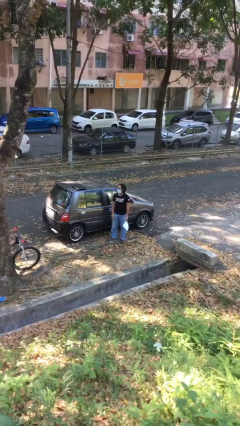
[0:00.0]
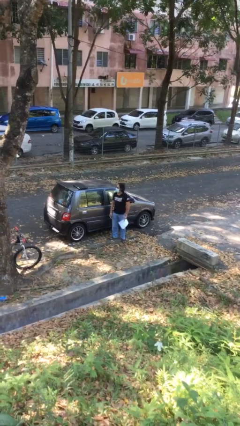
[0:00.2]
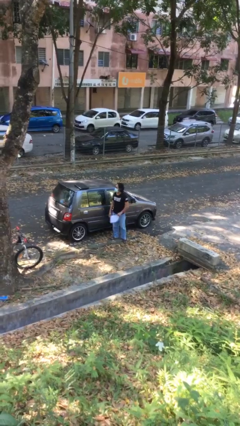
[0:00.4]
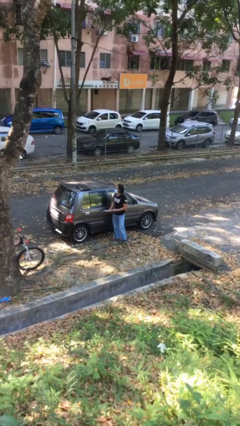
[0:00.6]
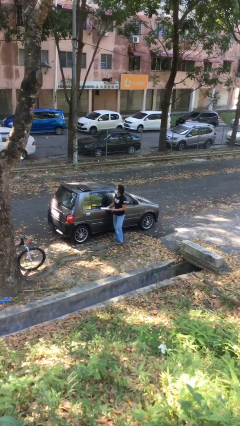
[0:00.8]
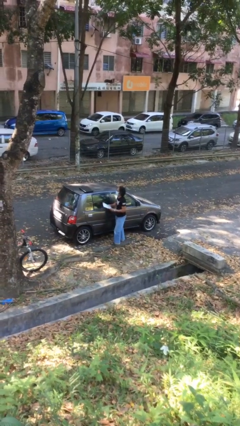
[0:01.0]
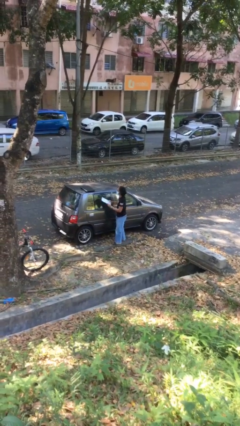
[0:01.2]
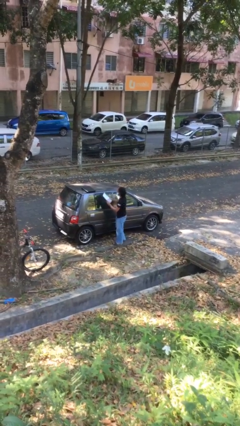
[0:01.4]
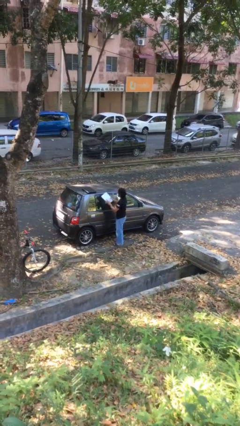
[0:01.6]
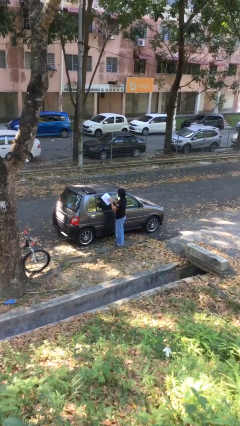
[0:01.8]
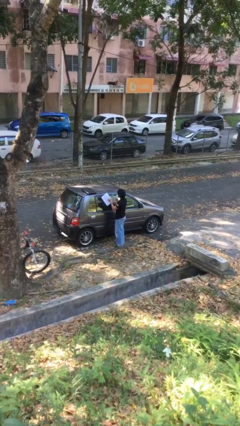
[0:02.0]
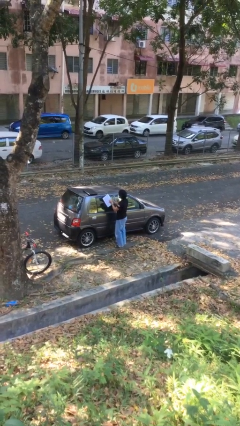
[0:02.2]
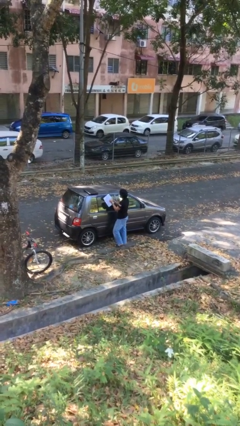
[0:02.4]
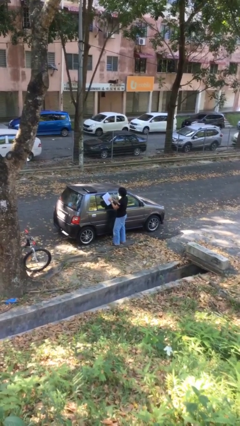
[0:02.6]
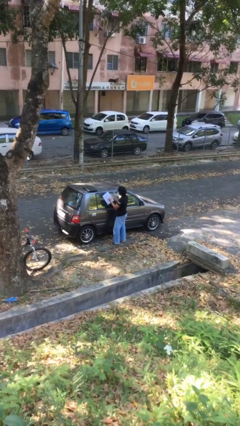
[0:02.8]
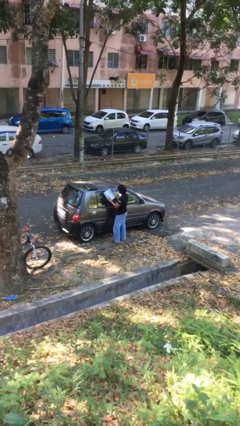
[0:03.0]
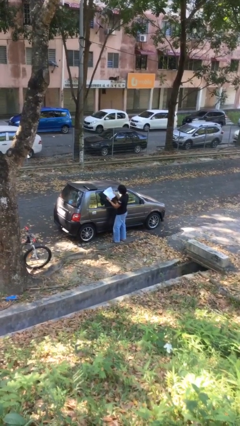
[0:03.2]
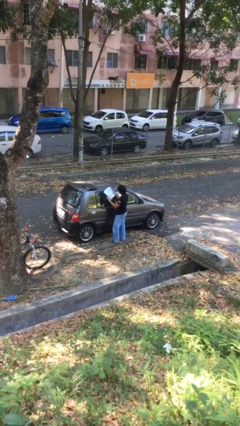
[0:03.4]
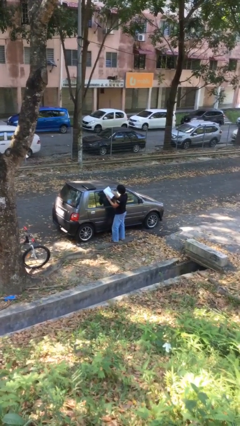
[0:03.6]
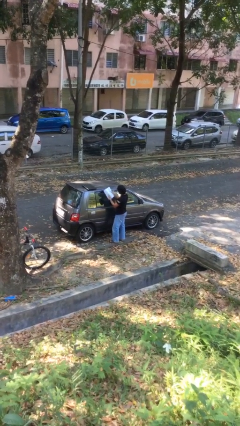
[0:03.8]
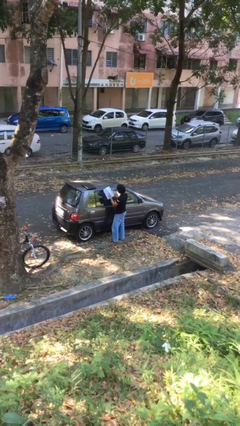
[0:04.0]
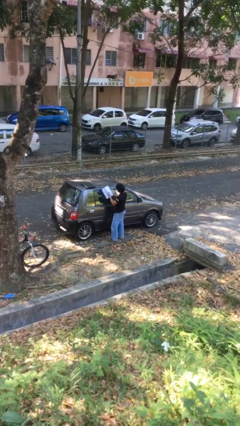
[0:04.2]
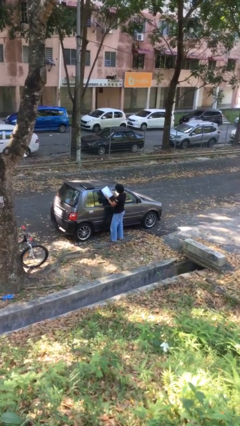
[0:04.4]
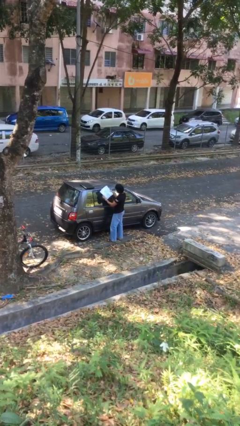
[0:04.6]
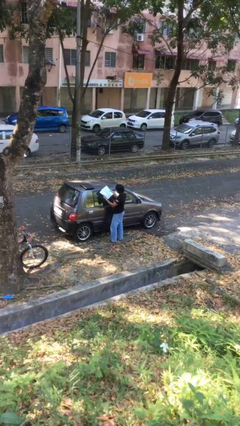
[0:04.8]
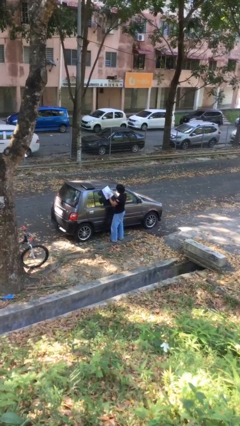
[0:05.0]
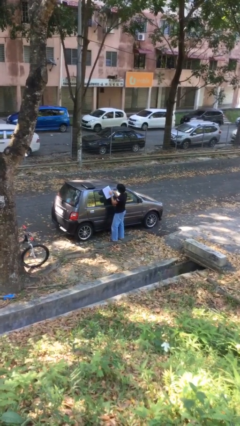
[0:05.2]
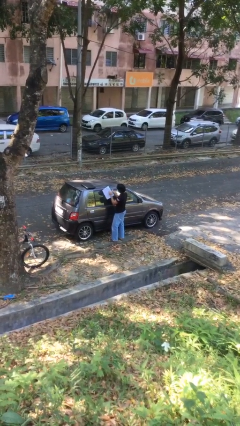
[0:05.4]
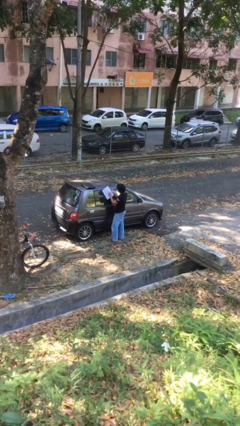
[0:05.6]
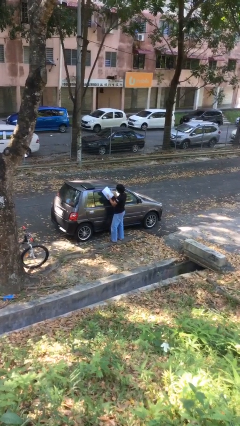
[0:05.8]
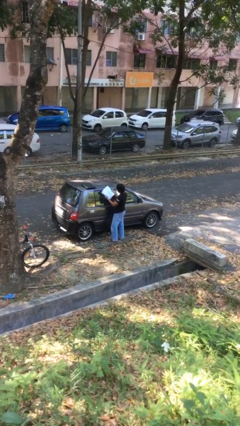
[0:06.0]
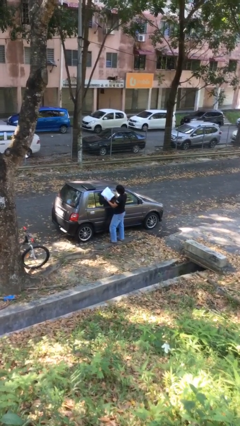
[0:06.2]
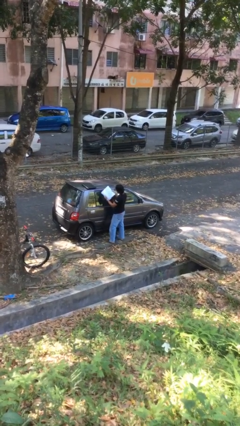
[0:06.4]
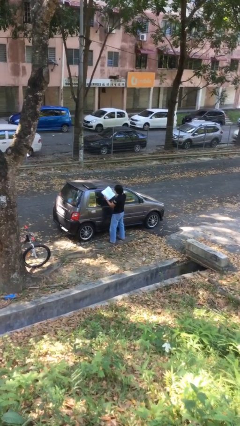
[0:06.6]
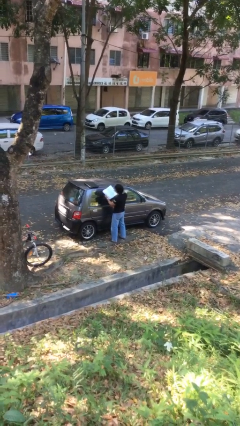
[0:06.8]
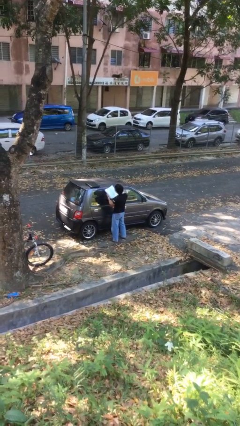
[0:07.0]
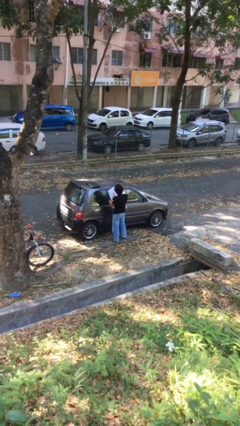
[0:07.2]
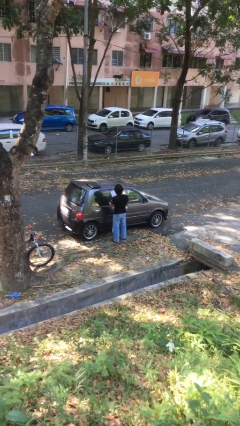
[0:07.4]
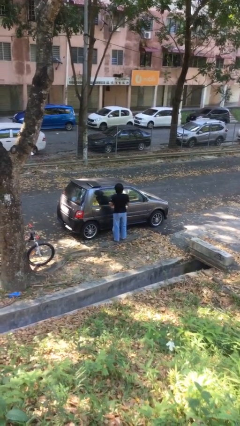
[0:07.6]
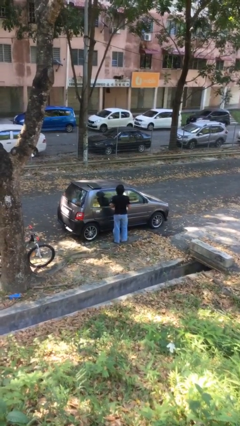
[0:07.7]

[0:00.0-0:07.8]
person reads document

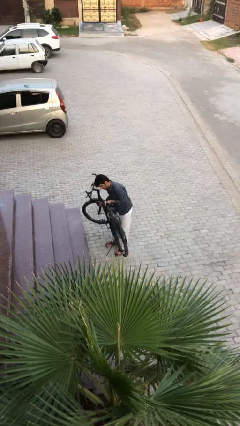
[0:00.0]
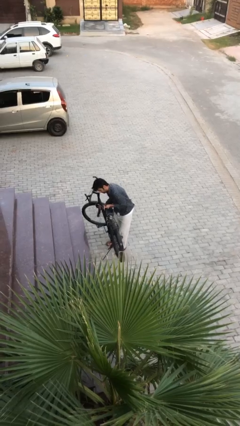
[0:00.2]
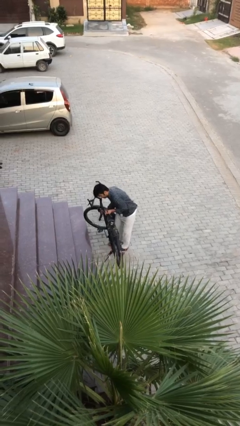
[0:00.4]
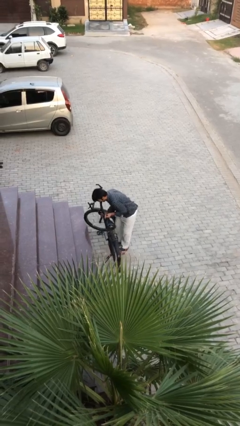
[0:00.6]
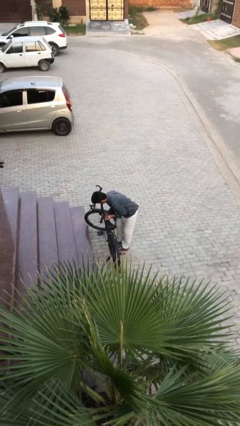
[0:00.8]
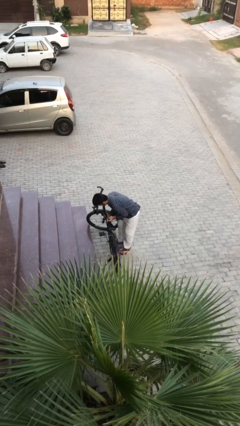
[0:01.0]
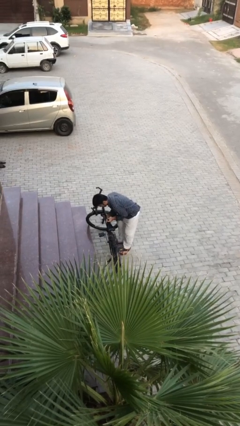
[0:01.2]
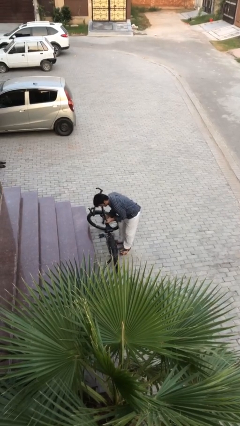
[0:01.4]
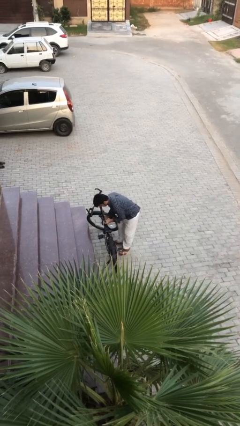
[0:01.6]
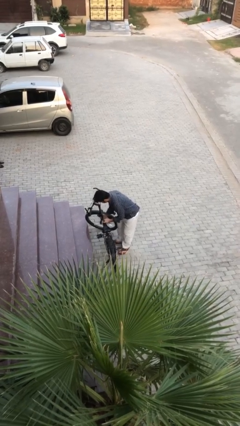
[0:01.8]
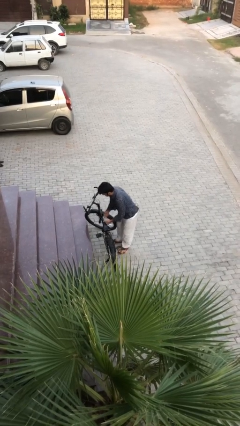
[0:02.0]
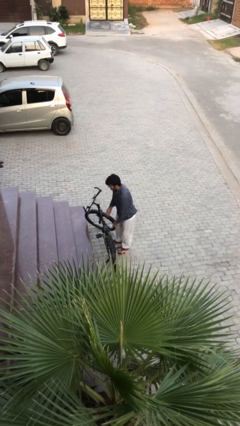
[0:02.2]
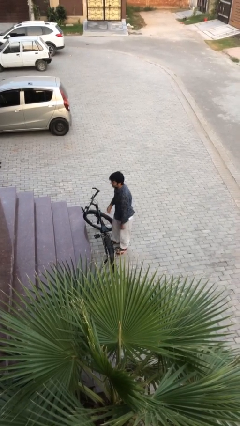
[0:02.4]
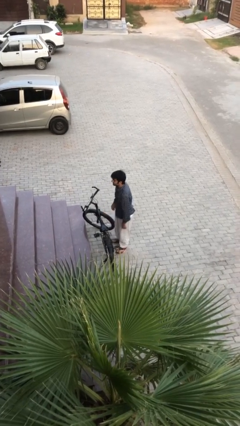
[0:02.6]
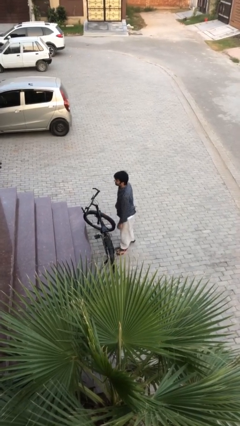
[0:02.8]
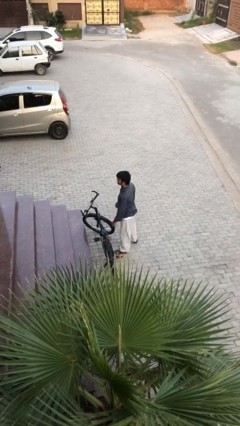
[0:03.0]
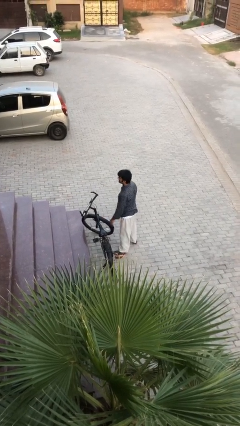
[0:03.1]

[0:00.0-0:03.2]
person puts down object on floor

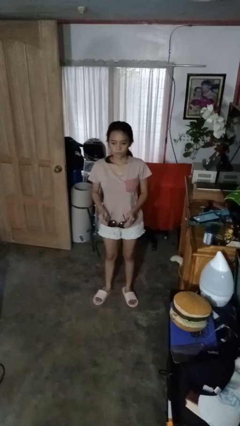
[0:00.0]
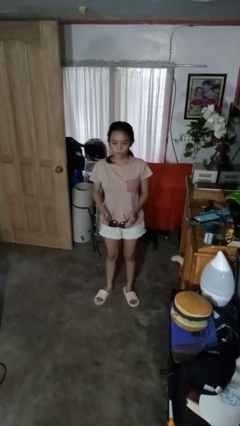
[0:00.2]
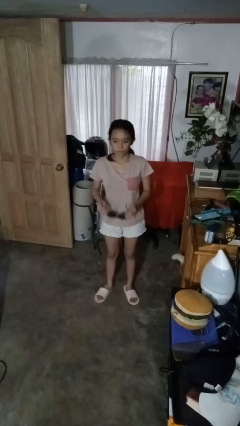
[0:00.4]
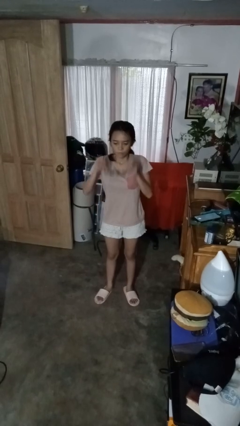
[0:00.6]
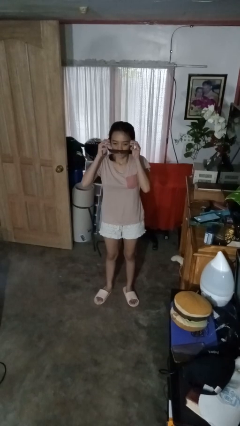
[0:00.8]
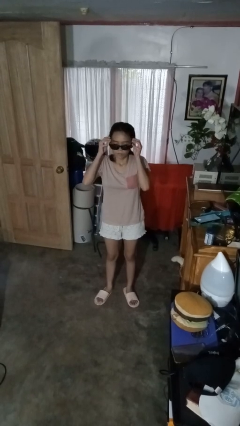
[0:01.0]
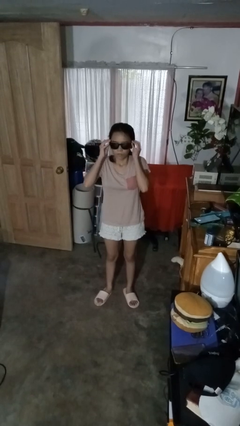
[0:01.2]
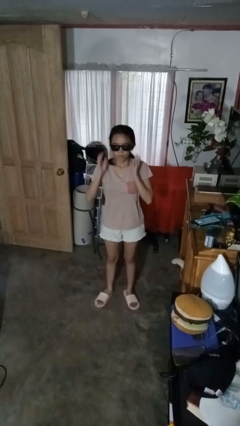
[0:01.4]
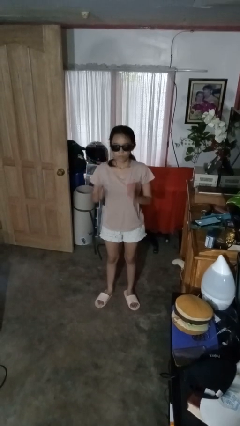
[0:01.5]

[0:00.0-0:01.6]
person puts on sunglasses

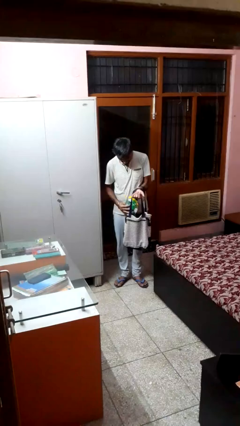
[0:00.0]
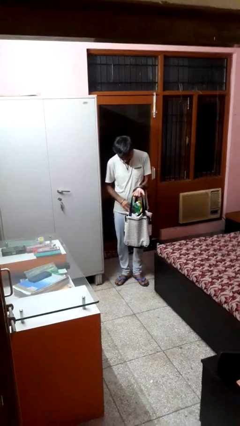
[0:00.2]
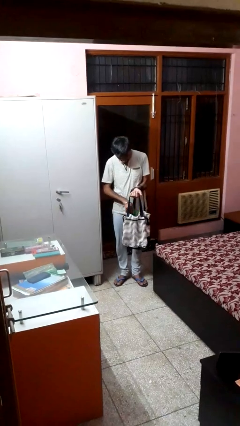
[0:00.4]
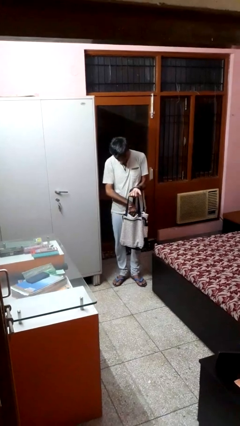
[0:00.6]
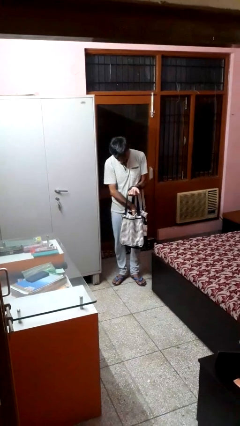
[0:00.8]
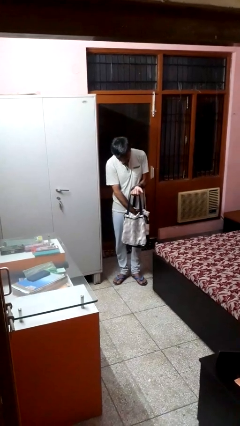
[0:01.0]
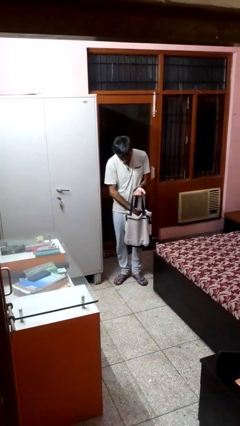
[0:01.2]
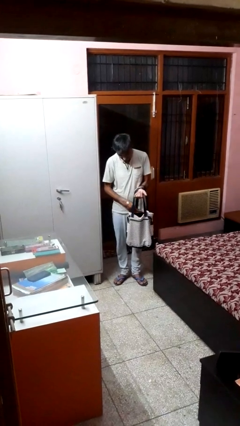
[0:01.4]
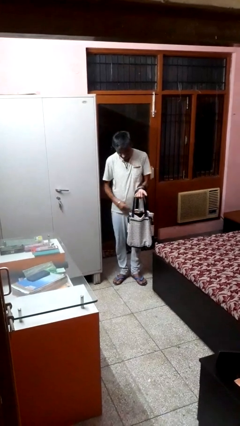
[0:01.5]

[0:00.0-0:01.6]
person puts object into bag

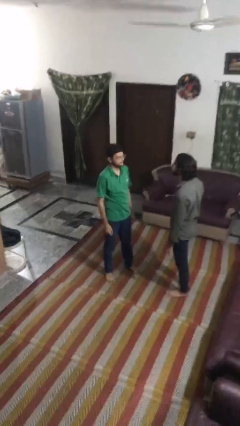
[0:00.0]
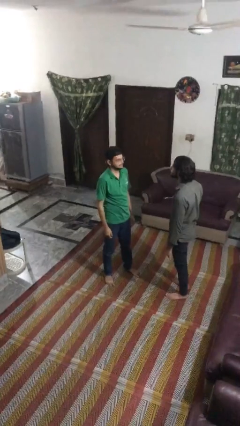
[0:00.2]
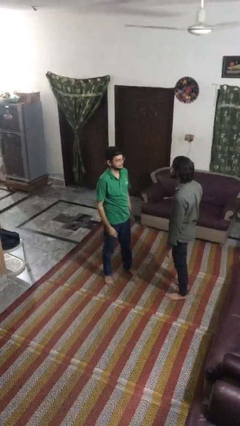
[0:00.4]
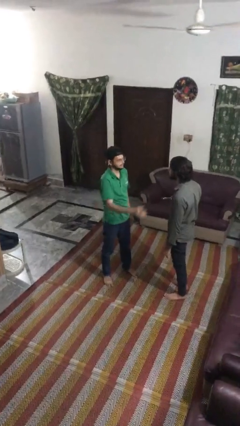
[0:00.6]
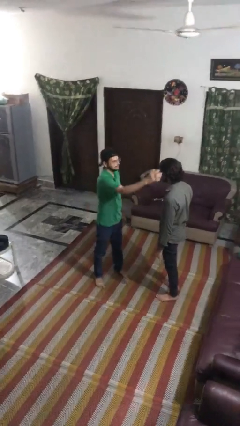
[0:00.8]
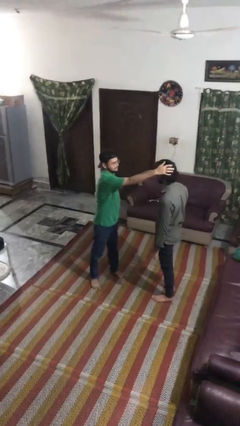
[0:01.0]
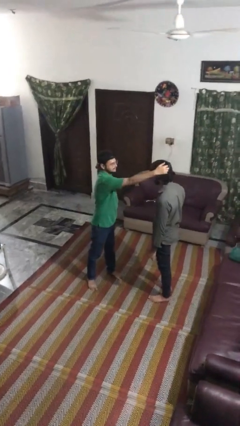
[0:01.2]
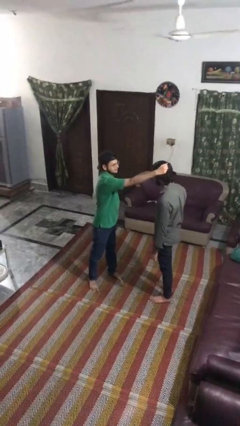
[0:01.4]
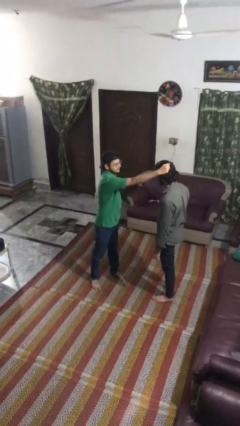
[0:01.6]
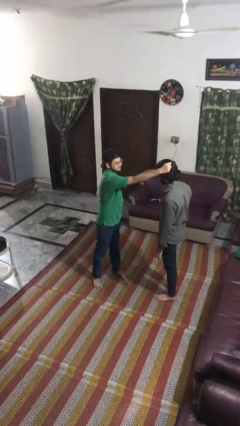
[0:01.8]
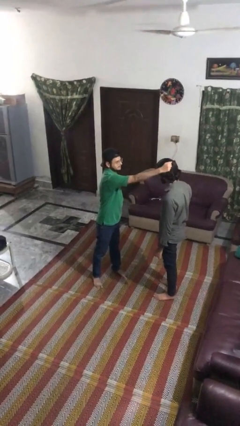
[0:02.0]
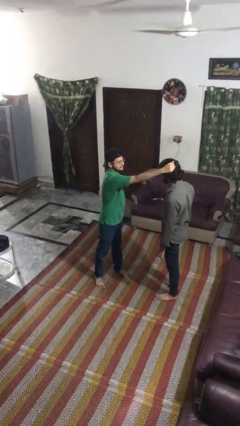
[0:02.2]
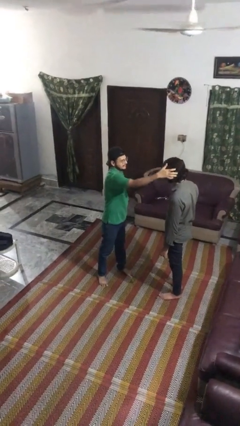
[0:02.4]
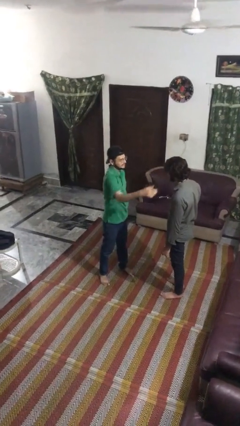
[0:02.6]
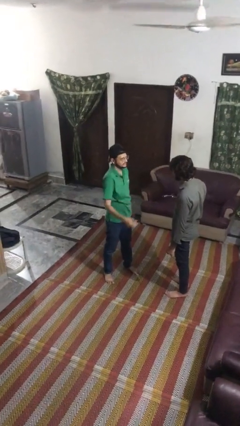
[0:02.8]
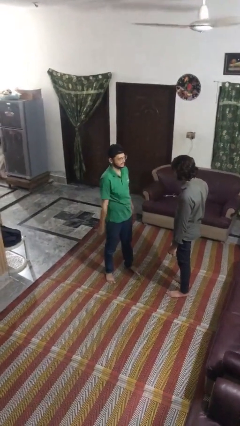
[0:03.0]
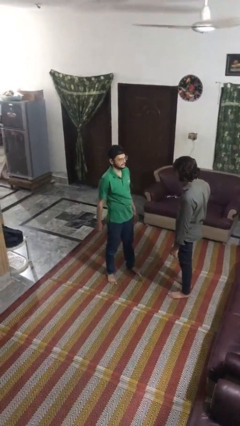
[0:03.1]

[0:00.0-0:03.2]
person grabs person by hair
